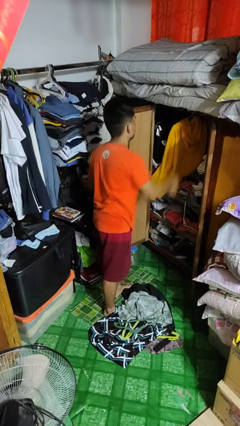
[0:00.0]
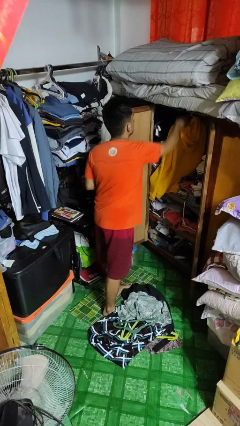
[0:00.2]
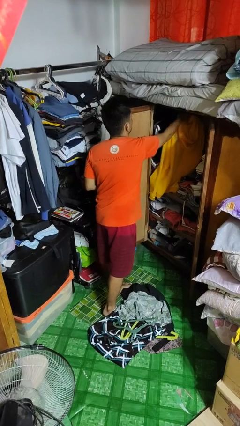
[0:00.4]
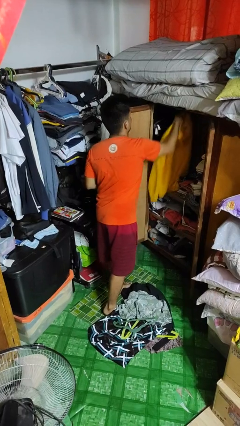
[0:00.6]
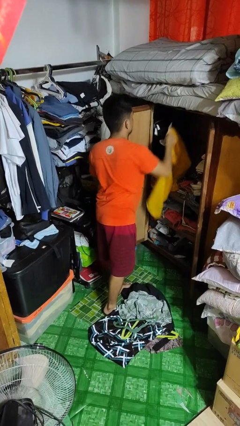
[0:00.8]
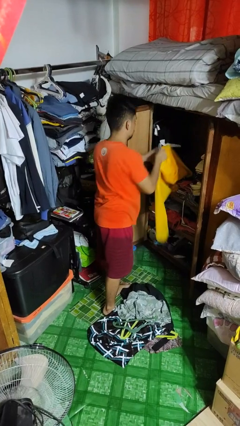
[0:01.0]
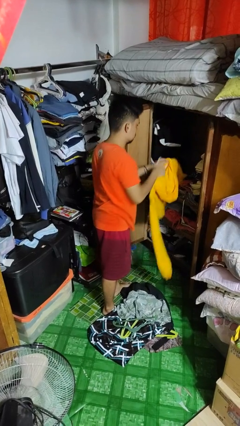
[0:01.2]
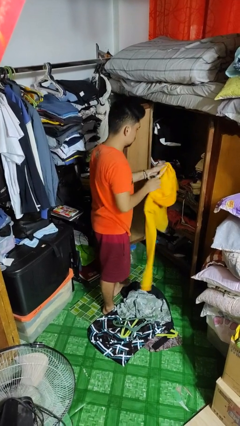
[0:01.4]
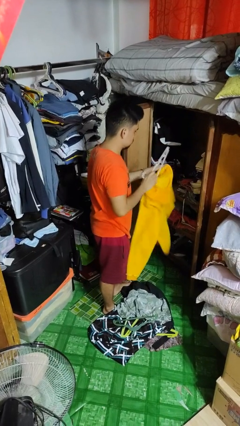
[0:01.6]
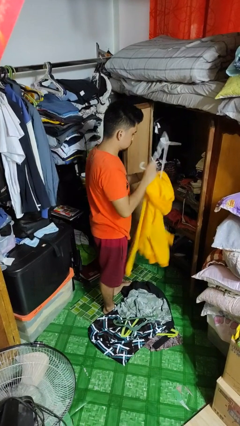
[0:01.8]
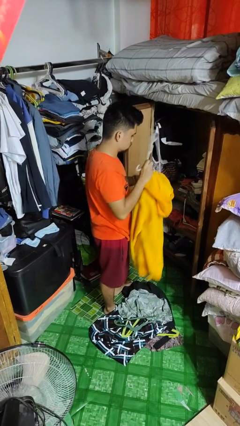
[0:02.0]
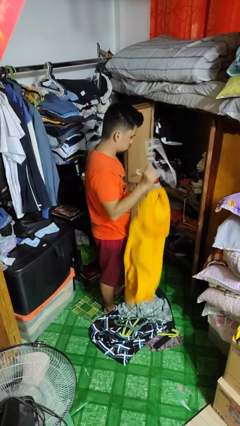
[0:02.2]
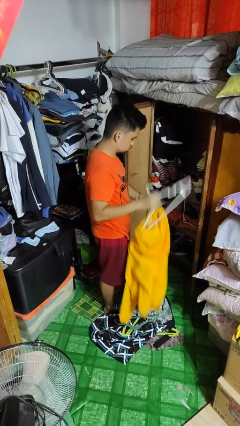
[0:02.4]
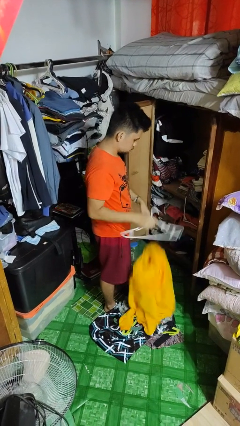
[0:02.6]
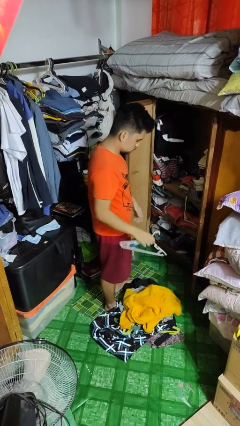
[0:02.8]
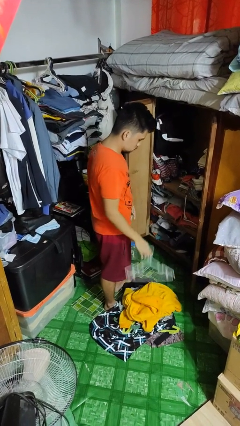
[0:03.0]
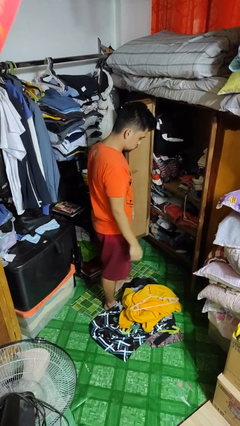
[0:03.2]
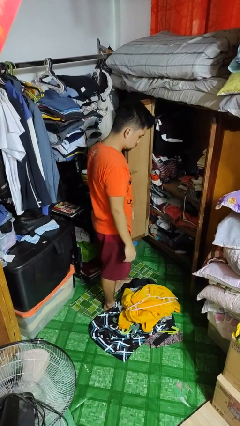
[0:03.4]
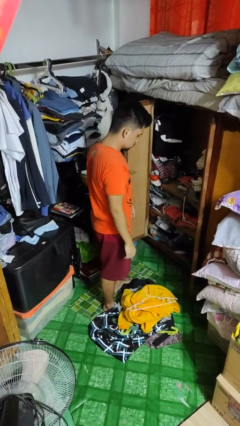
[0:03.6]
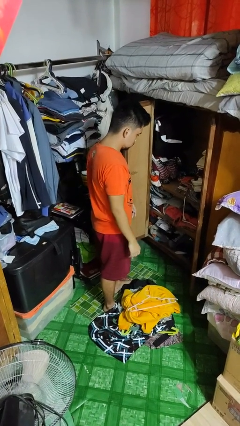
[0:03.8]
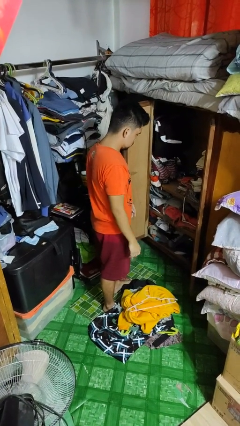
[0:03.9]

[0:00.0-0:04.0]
person takes clothes from closet

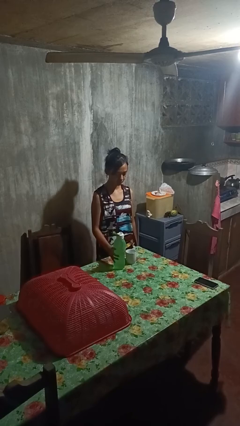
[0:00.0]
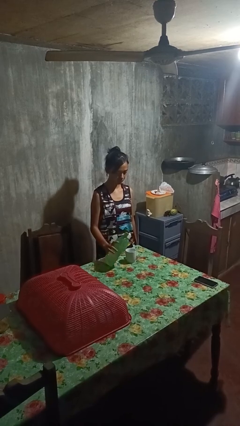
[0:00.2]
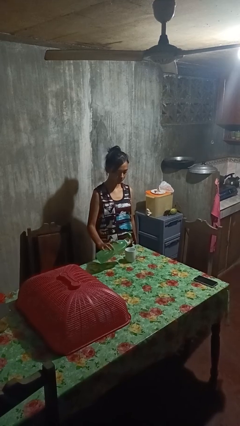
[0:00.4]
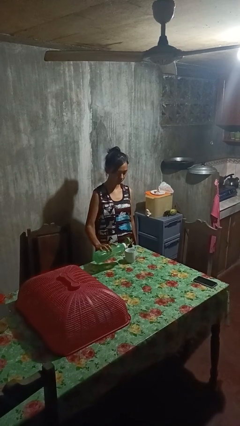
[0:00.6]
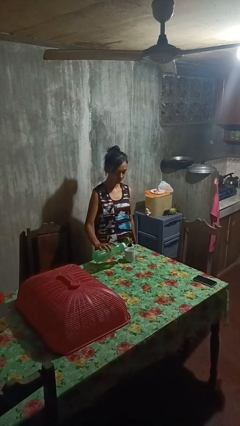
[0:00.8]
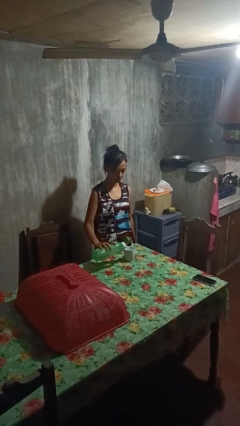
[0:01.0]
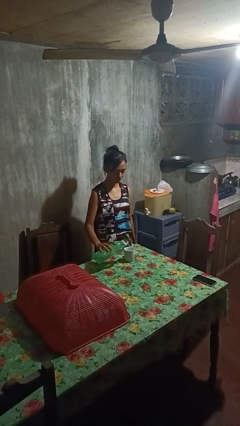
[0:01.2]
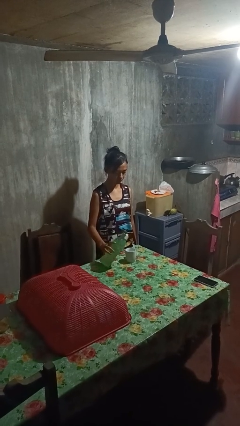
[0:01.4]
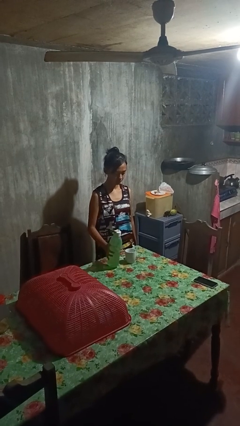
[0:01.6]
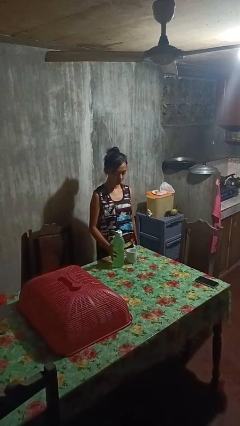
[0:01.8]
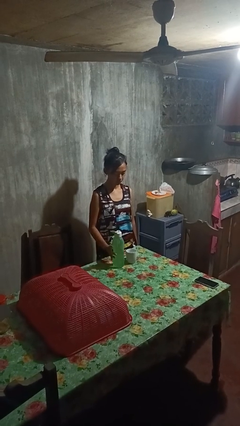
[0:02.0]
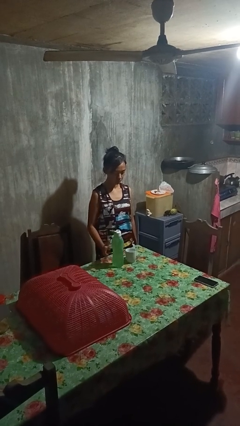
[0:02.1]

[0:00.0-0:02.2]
person pours liquid into cup

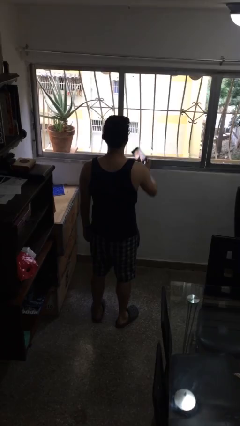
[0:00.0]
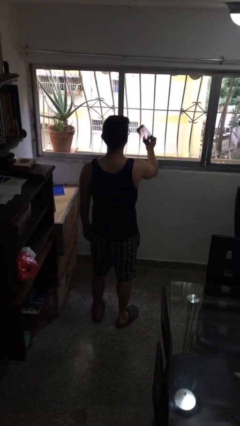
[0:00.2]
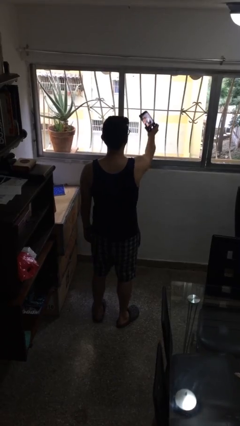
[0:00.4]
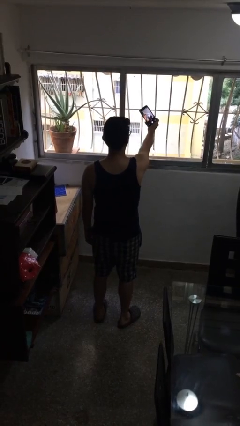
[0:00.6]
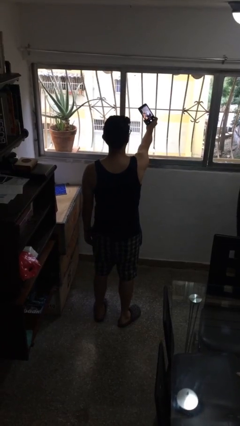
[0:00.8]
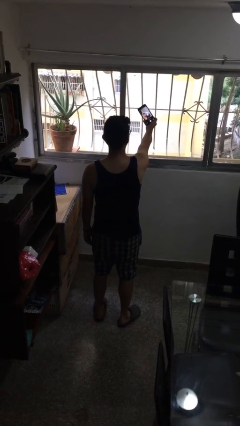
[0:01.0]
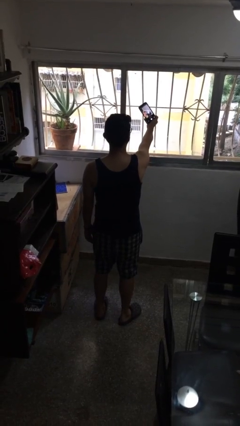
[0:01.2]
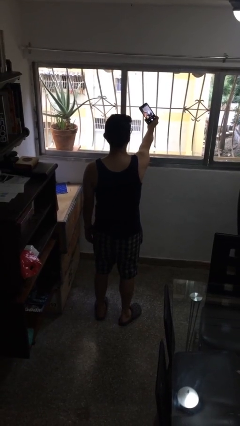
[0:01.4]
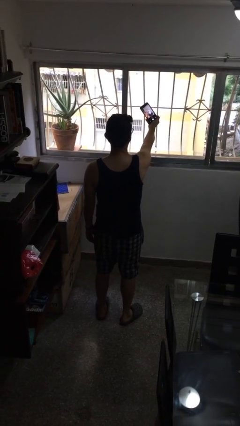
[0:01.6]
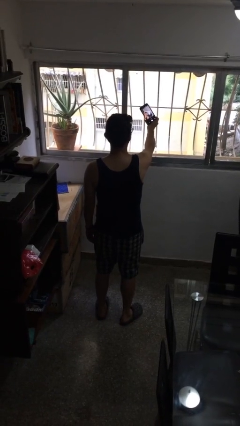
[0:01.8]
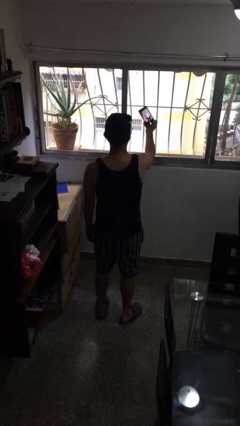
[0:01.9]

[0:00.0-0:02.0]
person takes selfie

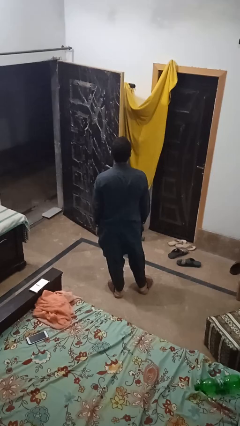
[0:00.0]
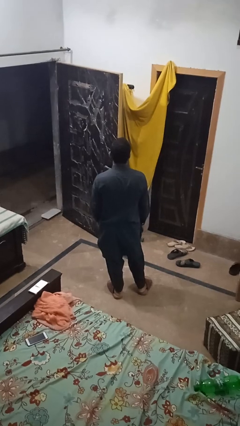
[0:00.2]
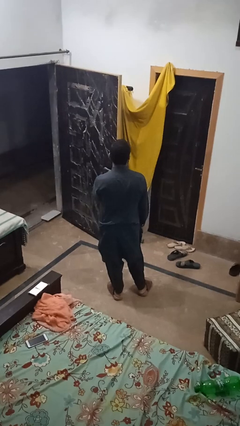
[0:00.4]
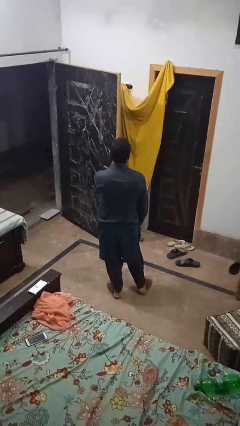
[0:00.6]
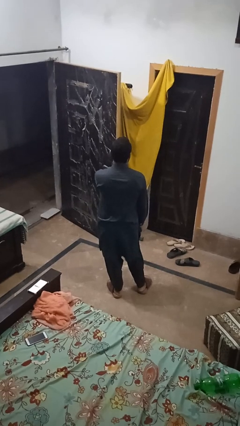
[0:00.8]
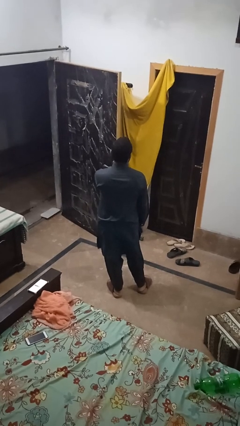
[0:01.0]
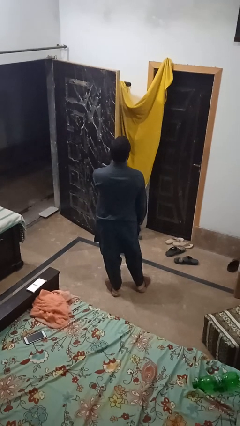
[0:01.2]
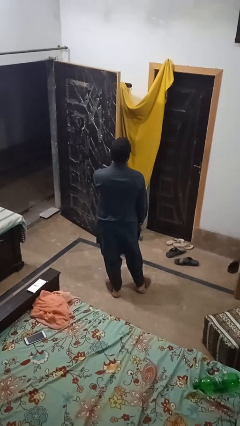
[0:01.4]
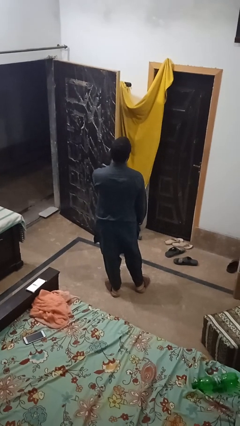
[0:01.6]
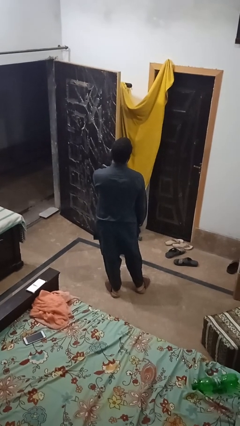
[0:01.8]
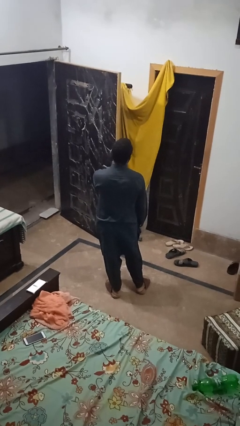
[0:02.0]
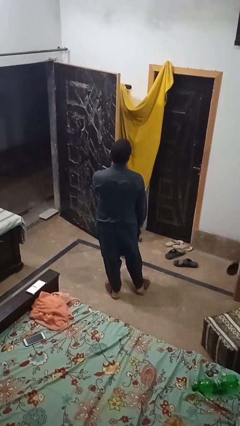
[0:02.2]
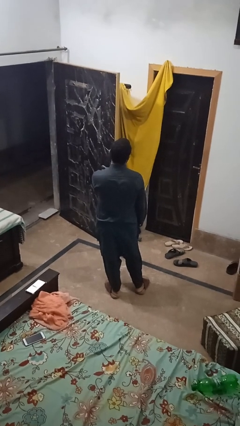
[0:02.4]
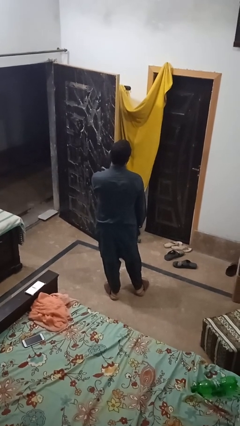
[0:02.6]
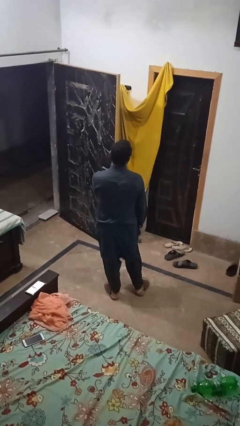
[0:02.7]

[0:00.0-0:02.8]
person gestures stop

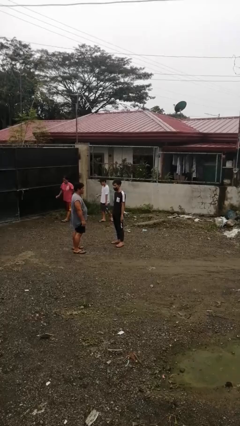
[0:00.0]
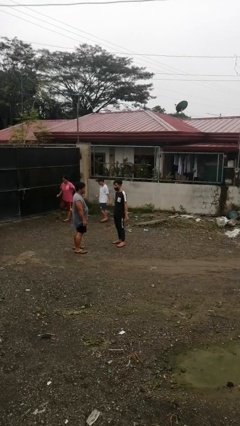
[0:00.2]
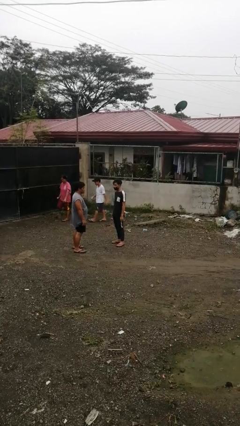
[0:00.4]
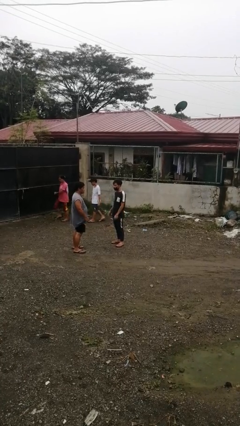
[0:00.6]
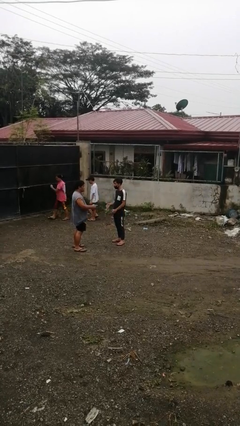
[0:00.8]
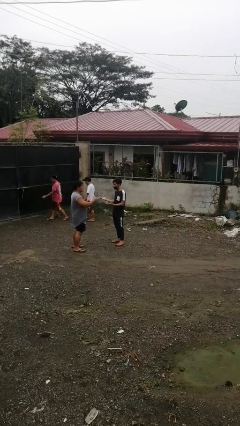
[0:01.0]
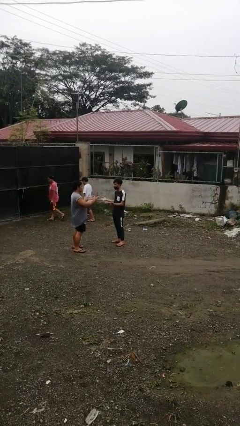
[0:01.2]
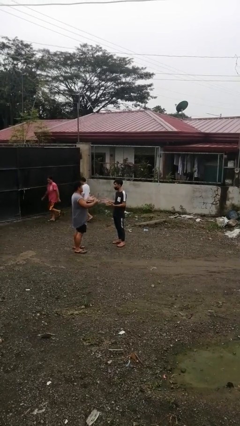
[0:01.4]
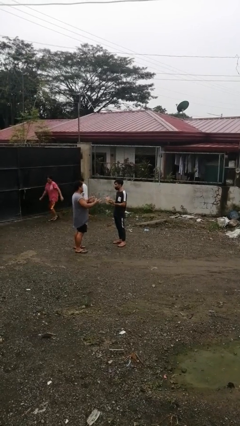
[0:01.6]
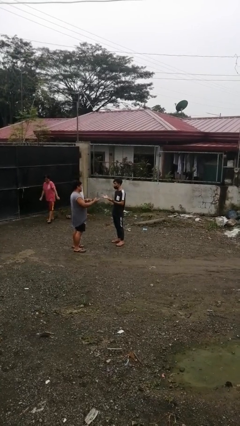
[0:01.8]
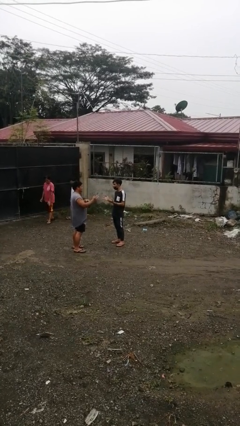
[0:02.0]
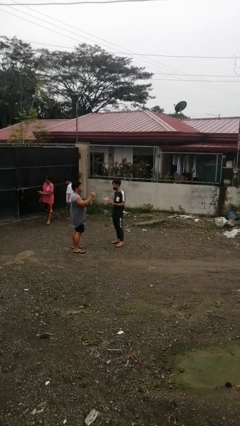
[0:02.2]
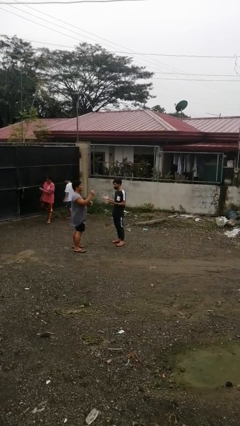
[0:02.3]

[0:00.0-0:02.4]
person talks to person

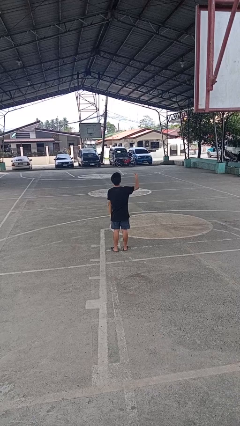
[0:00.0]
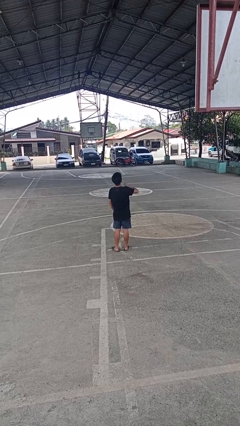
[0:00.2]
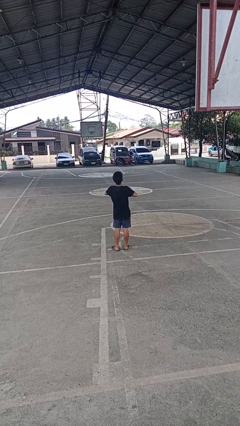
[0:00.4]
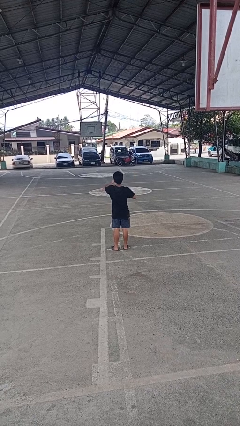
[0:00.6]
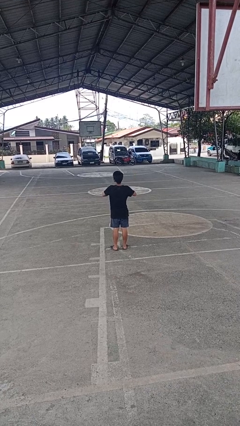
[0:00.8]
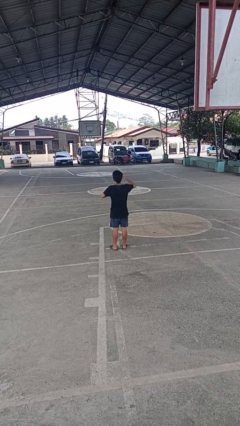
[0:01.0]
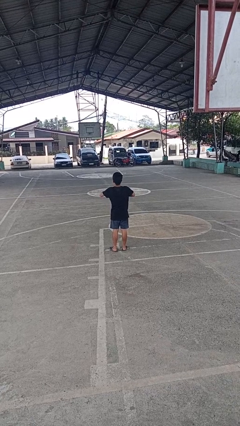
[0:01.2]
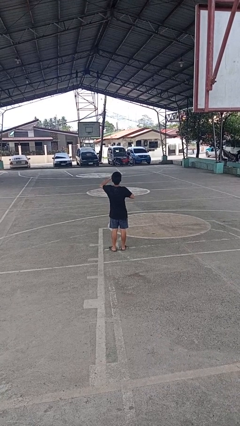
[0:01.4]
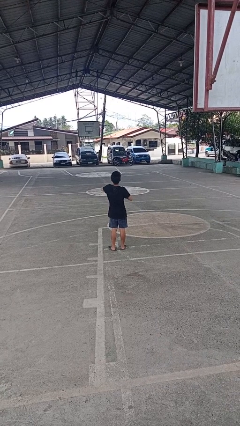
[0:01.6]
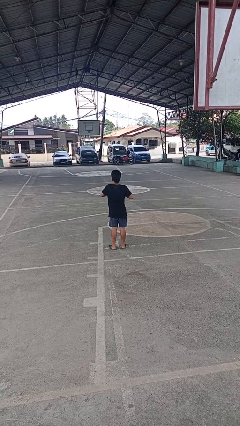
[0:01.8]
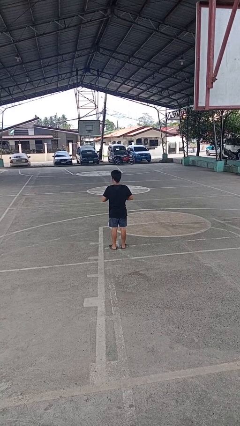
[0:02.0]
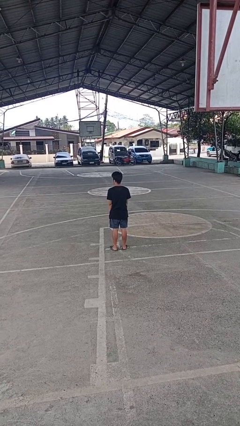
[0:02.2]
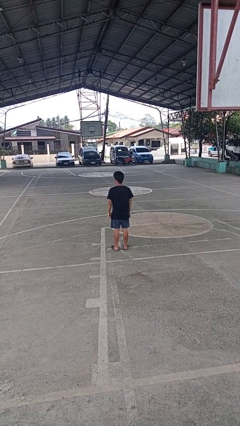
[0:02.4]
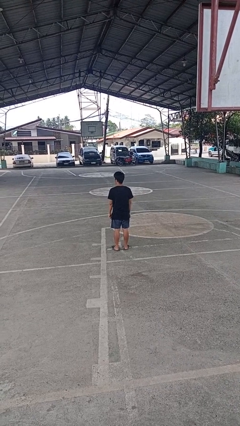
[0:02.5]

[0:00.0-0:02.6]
person drums on chest

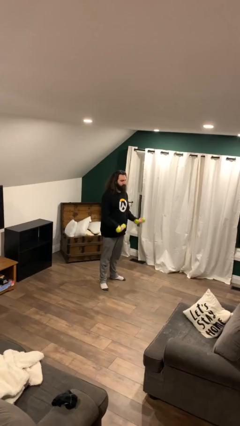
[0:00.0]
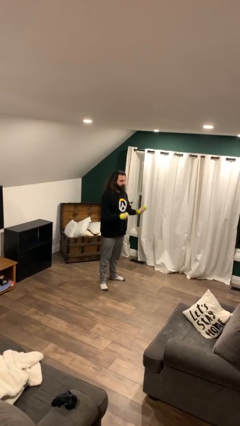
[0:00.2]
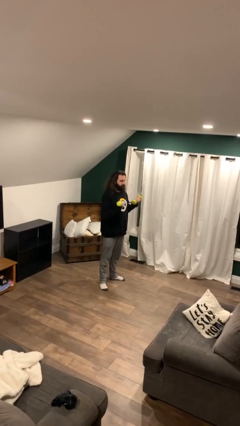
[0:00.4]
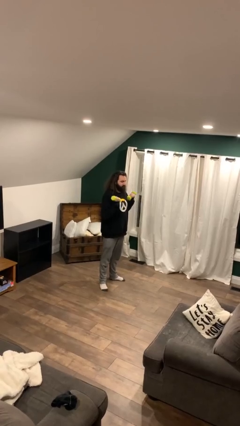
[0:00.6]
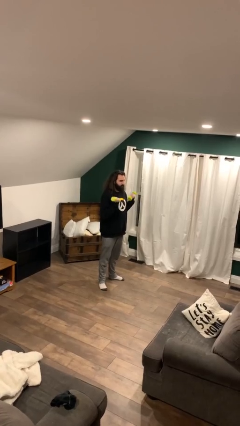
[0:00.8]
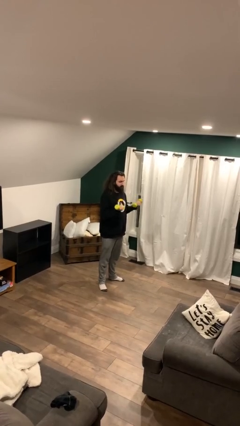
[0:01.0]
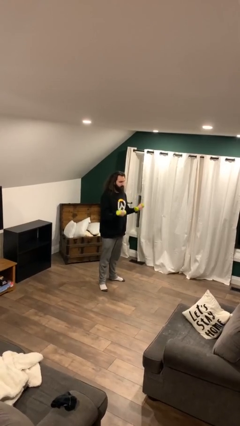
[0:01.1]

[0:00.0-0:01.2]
person lifts dumbbells
